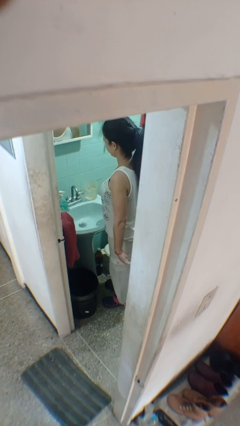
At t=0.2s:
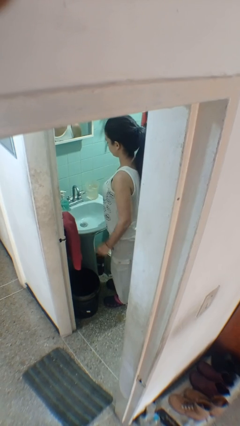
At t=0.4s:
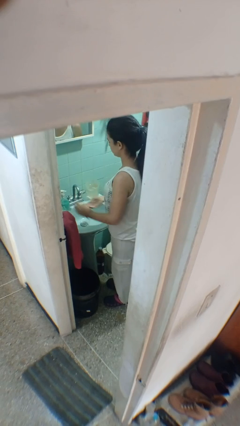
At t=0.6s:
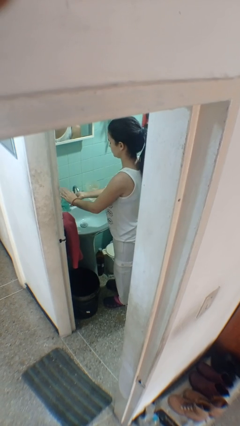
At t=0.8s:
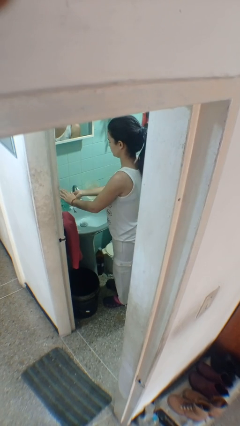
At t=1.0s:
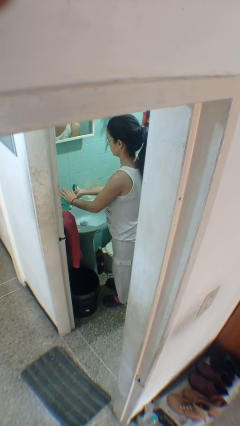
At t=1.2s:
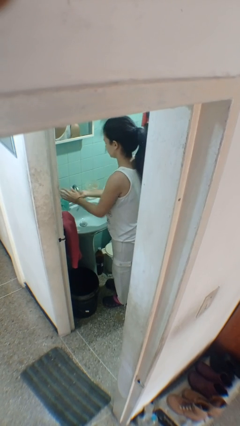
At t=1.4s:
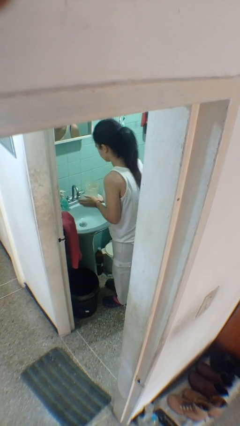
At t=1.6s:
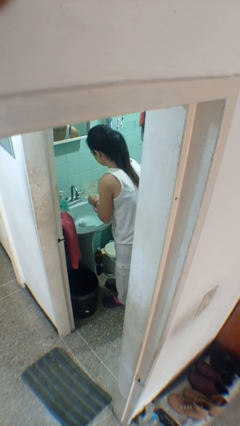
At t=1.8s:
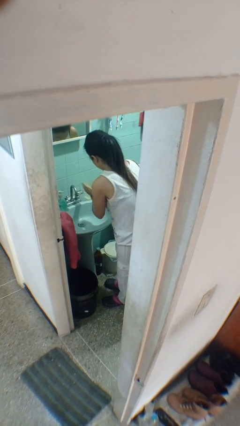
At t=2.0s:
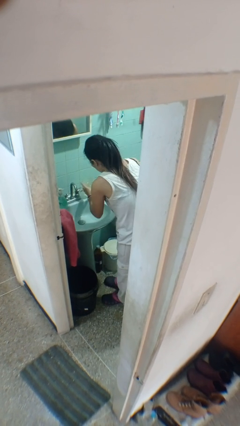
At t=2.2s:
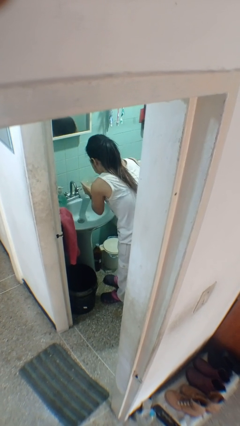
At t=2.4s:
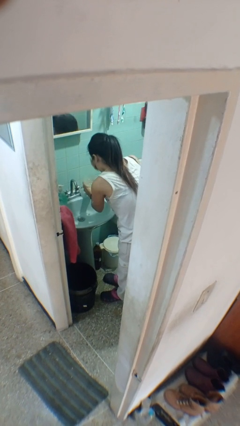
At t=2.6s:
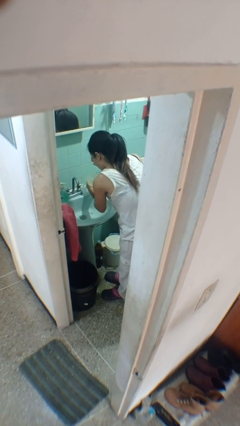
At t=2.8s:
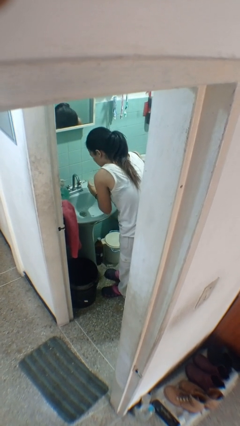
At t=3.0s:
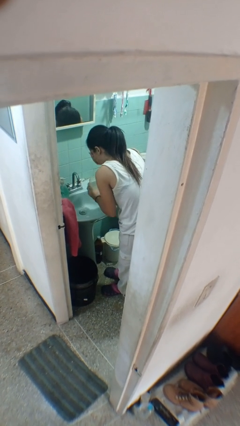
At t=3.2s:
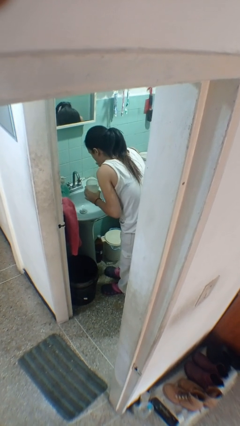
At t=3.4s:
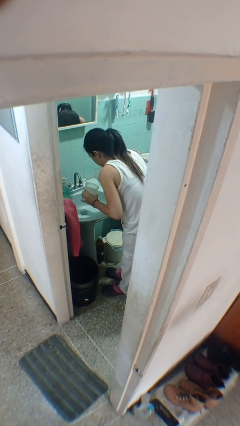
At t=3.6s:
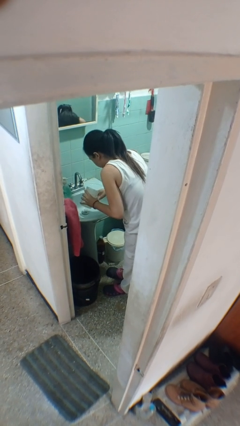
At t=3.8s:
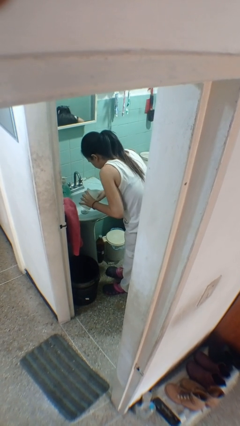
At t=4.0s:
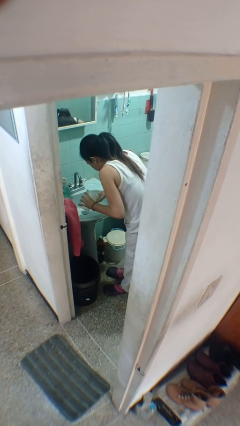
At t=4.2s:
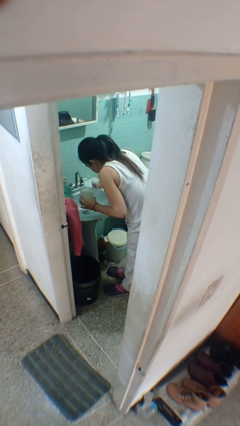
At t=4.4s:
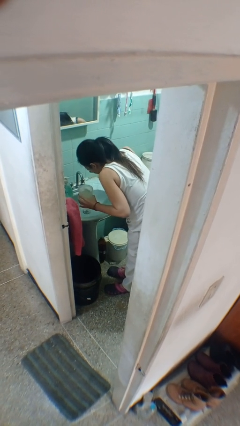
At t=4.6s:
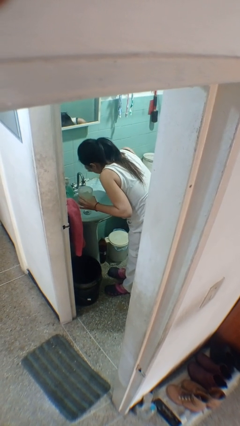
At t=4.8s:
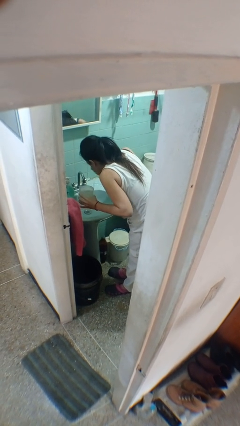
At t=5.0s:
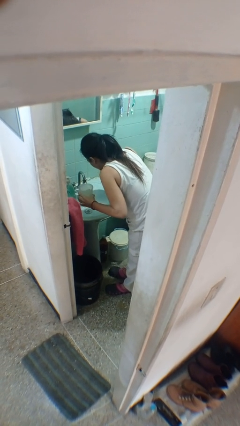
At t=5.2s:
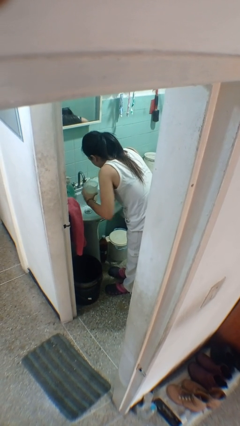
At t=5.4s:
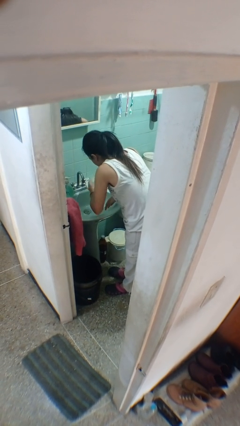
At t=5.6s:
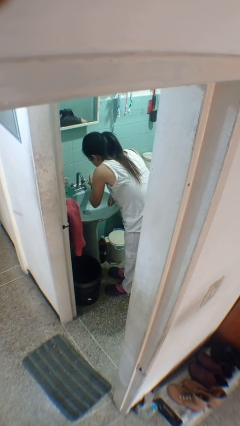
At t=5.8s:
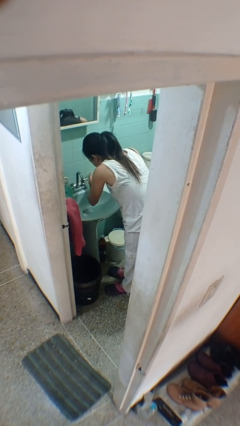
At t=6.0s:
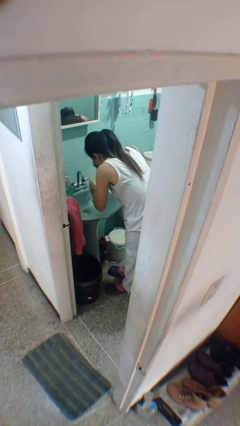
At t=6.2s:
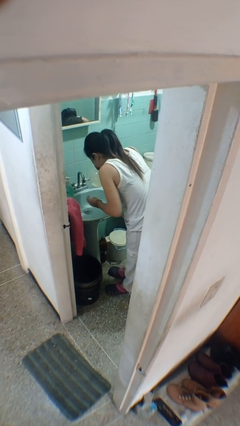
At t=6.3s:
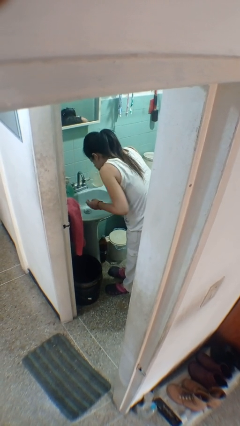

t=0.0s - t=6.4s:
person washes face

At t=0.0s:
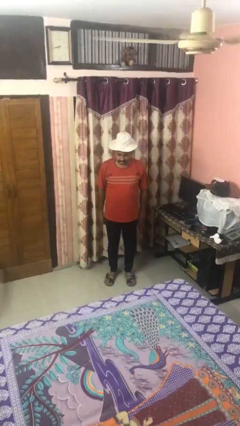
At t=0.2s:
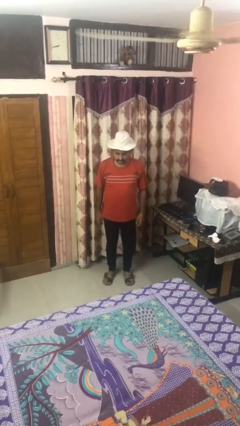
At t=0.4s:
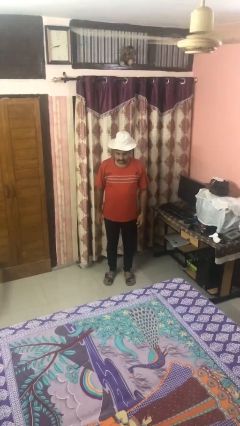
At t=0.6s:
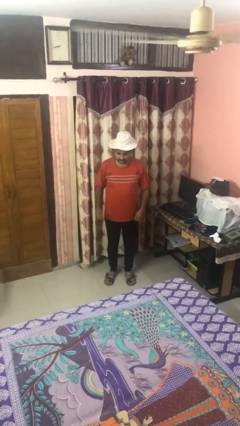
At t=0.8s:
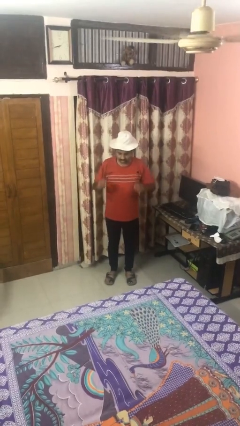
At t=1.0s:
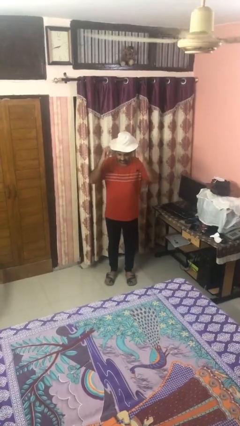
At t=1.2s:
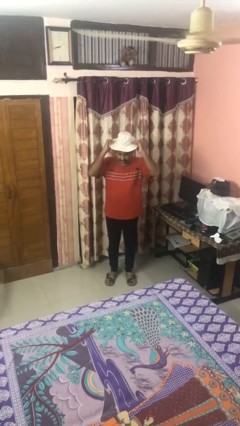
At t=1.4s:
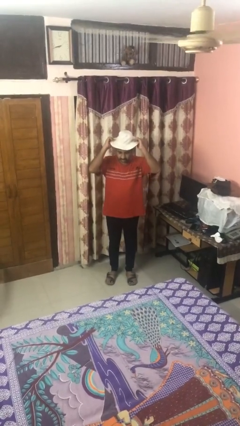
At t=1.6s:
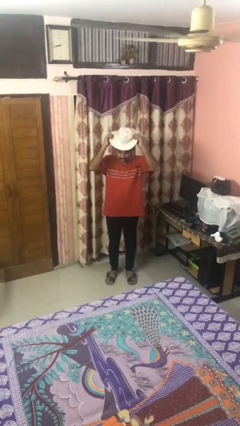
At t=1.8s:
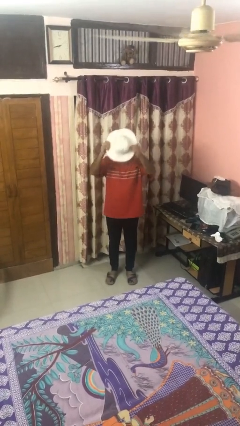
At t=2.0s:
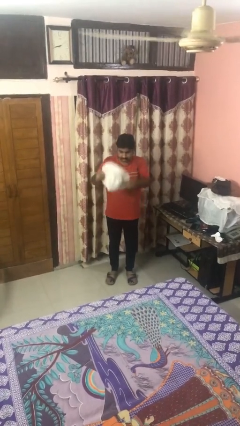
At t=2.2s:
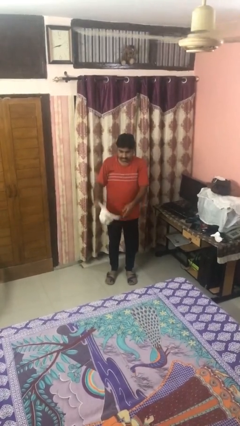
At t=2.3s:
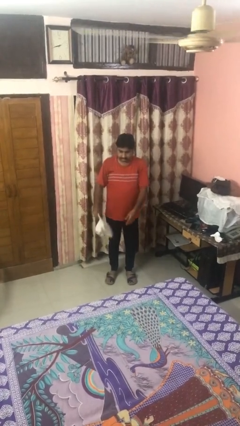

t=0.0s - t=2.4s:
person takes off hat

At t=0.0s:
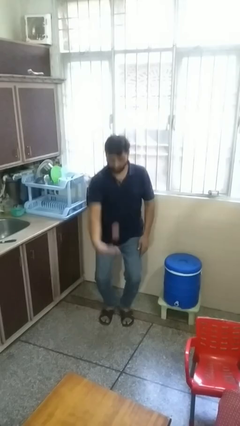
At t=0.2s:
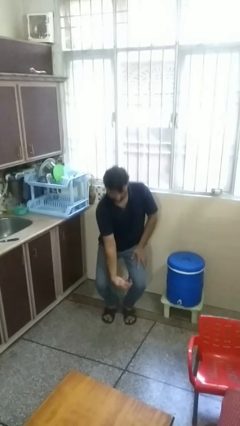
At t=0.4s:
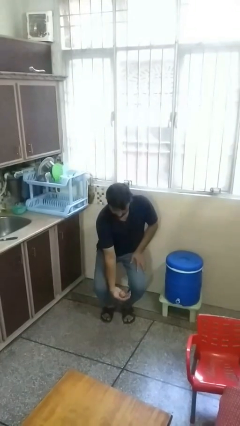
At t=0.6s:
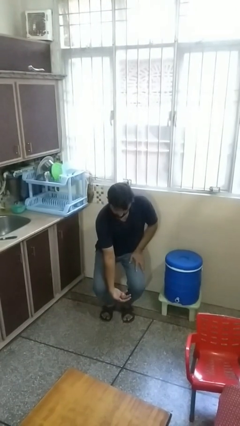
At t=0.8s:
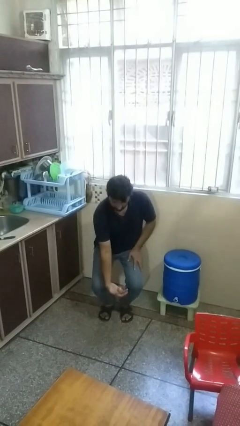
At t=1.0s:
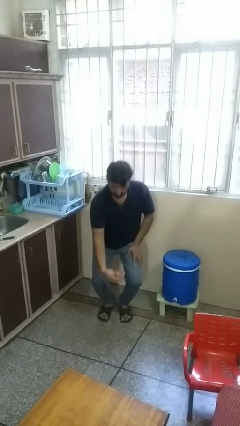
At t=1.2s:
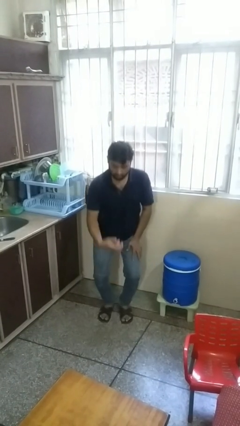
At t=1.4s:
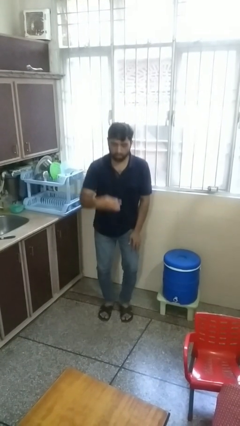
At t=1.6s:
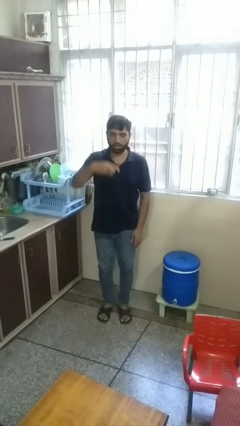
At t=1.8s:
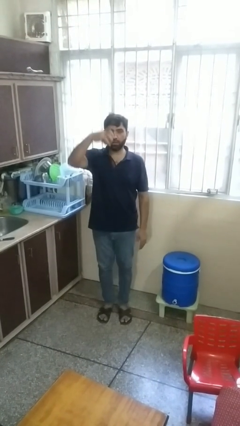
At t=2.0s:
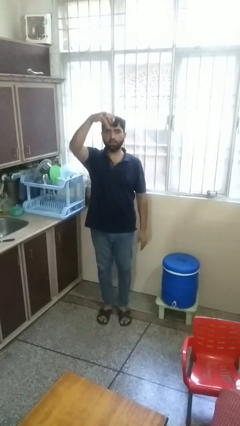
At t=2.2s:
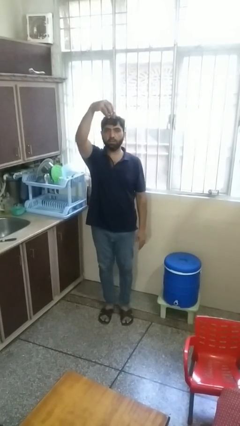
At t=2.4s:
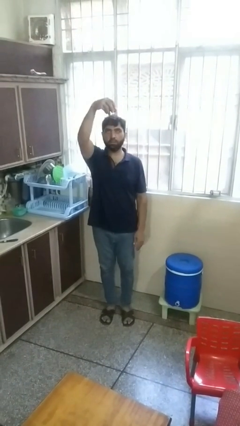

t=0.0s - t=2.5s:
person catches dropped object

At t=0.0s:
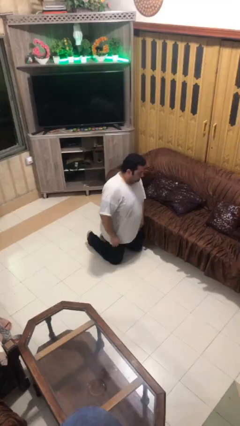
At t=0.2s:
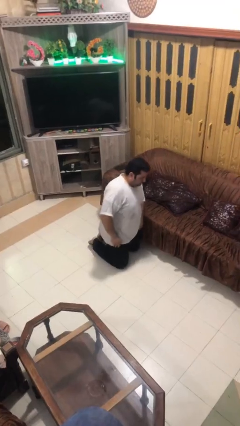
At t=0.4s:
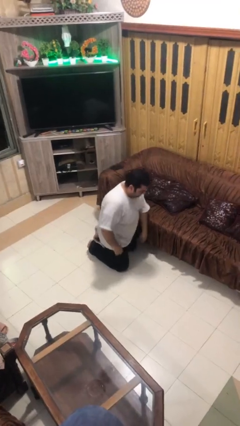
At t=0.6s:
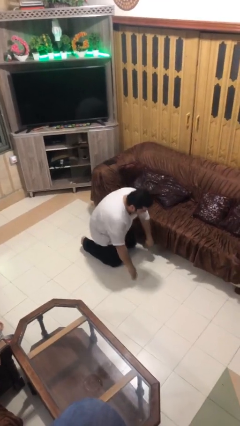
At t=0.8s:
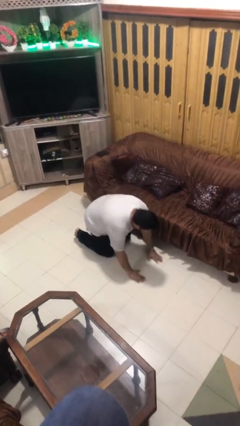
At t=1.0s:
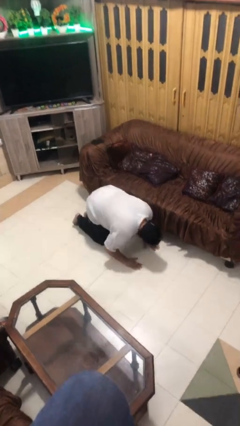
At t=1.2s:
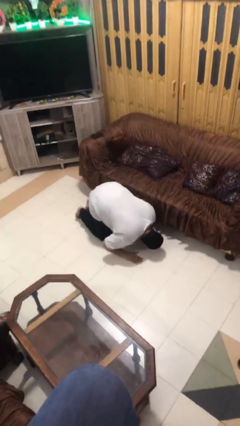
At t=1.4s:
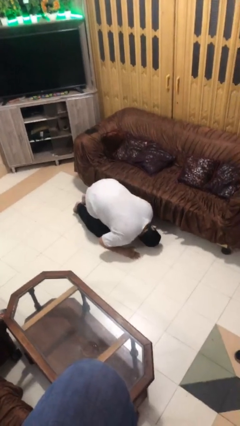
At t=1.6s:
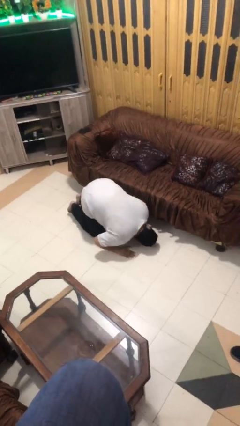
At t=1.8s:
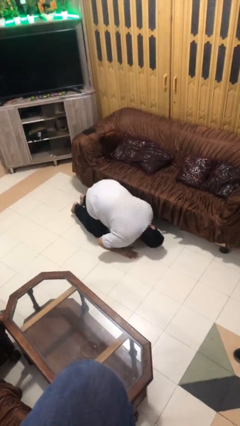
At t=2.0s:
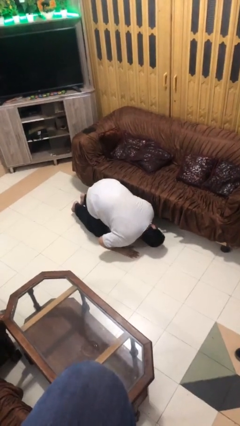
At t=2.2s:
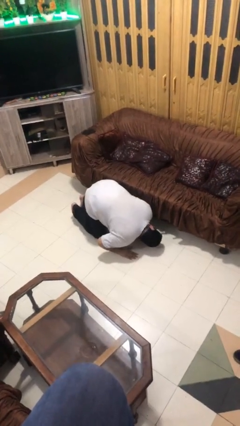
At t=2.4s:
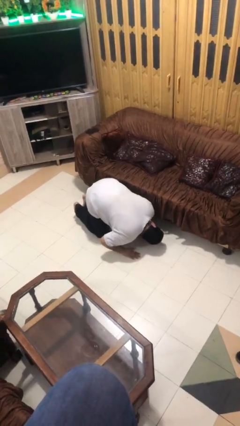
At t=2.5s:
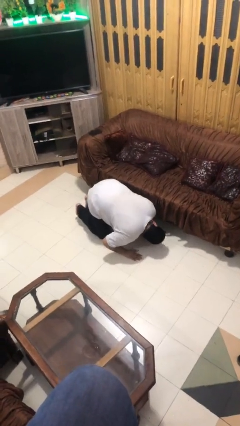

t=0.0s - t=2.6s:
person searches under couch

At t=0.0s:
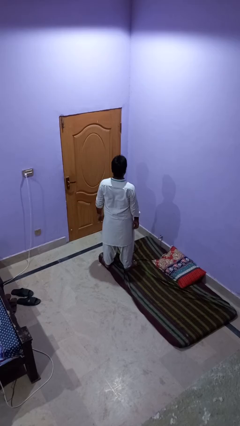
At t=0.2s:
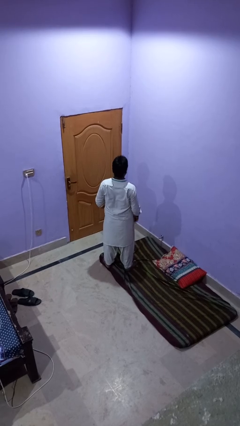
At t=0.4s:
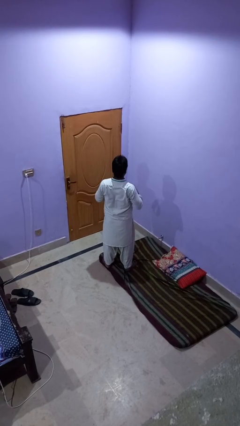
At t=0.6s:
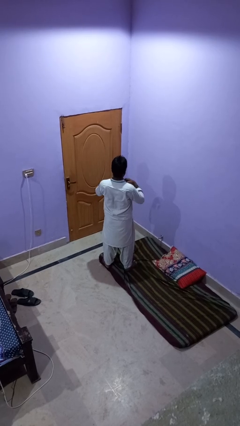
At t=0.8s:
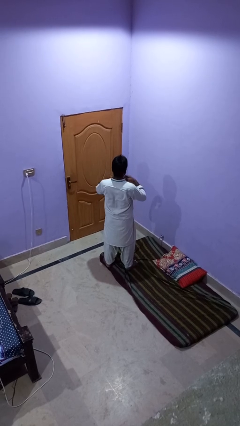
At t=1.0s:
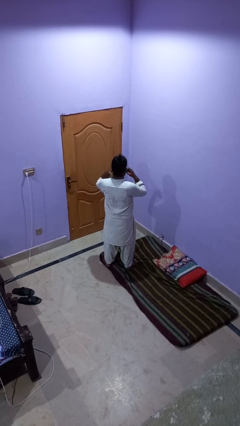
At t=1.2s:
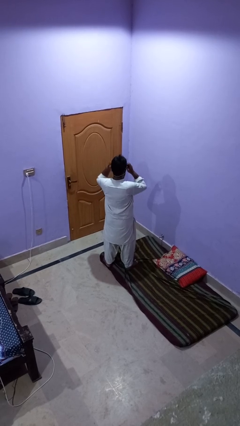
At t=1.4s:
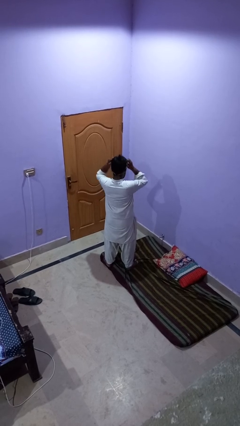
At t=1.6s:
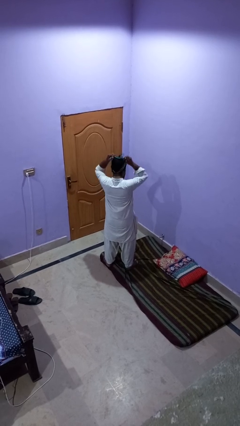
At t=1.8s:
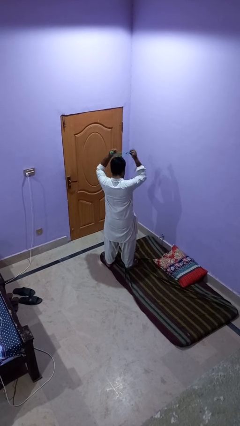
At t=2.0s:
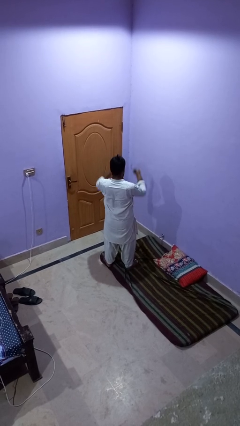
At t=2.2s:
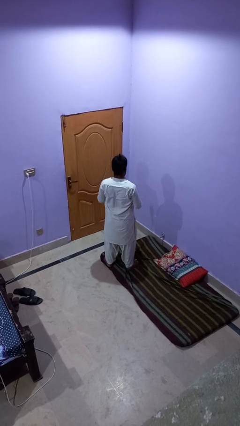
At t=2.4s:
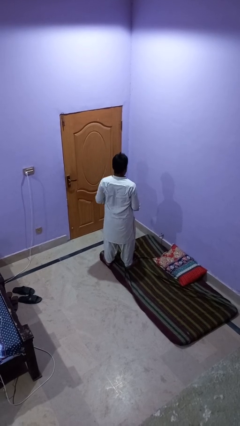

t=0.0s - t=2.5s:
person takes off necklace

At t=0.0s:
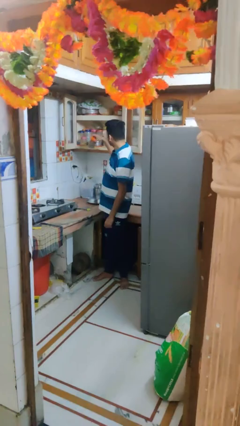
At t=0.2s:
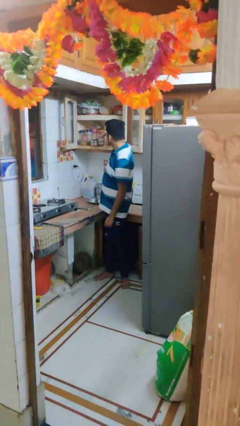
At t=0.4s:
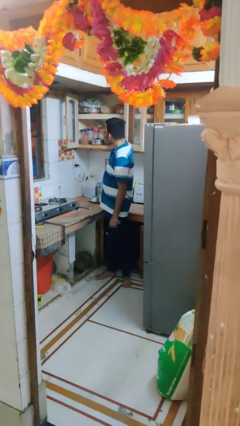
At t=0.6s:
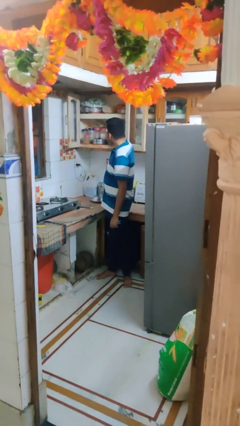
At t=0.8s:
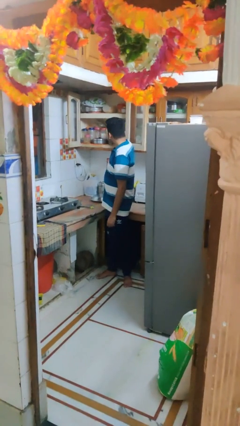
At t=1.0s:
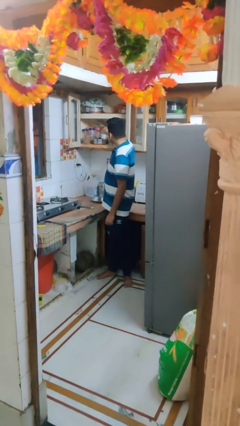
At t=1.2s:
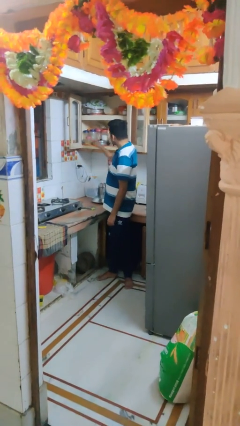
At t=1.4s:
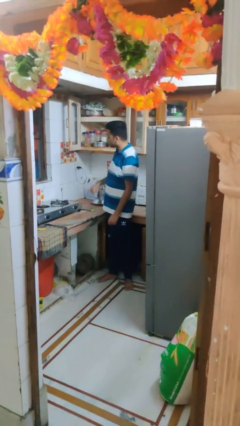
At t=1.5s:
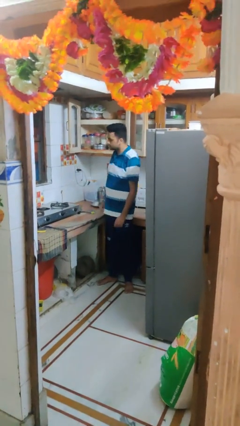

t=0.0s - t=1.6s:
person puts object in cabinet
